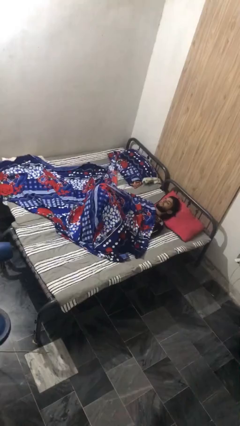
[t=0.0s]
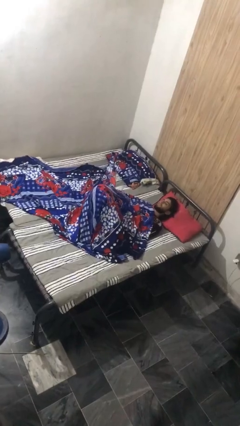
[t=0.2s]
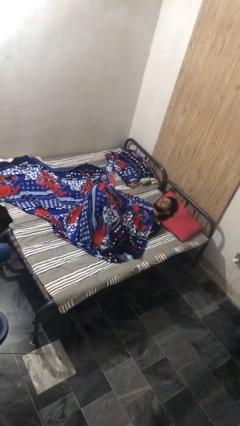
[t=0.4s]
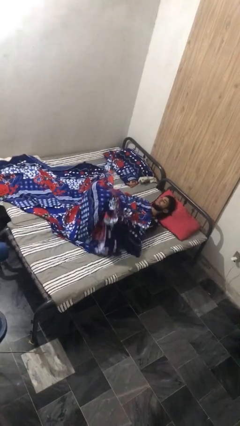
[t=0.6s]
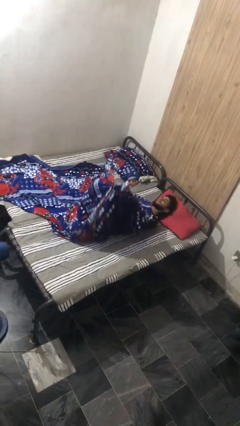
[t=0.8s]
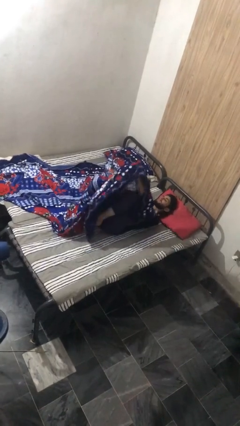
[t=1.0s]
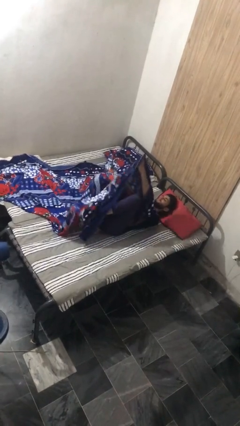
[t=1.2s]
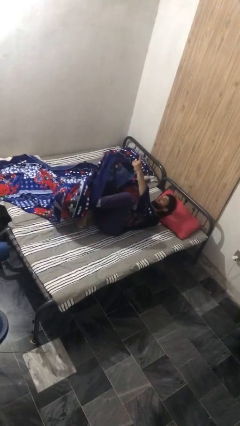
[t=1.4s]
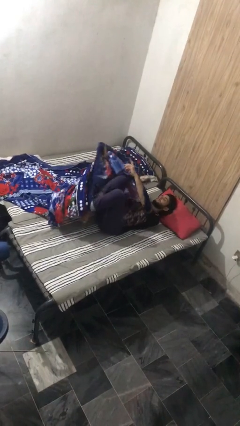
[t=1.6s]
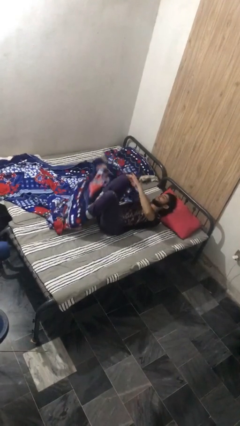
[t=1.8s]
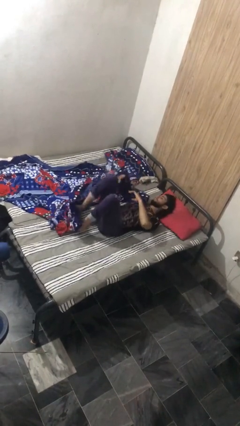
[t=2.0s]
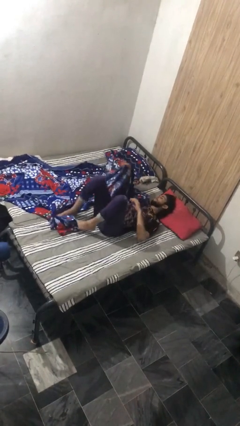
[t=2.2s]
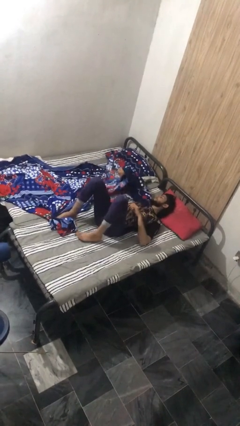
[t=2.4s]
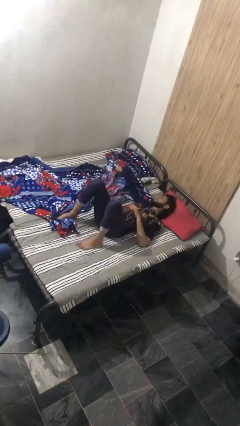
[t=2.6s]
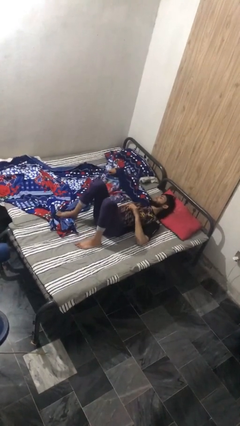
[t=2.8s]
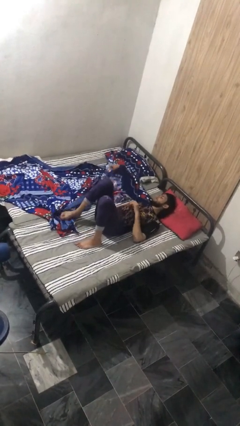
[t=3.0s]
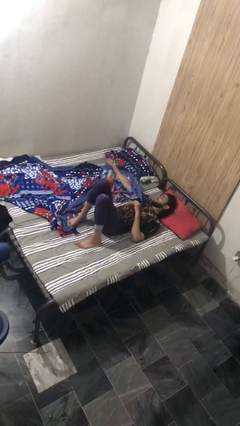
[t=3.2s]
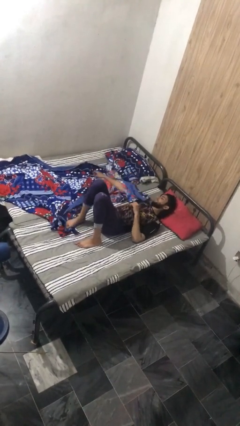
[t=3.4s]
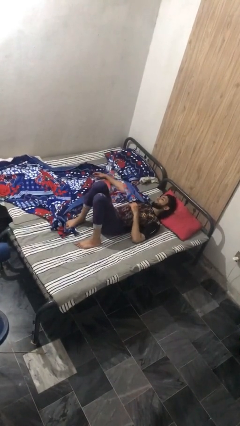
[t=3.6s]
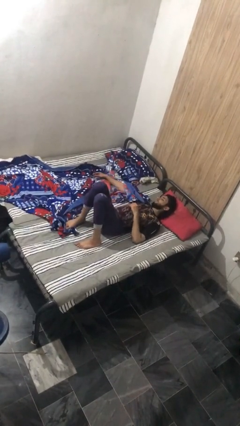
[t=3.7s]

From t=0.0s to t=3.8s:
person uncovers with bedsheets

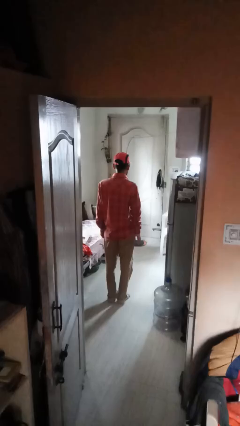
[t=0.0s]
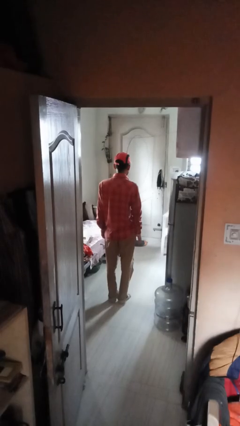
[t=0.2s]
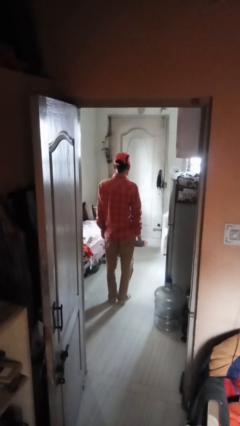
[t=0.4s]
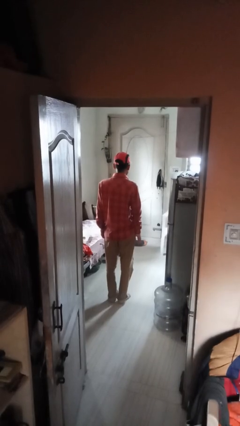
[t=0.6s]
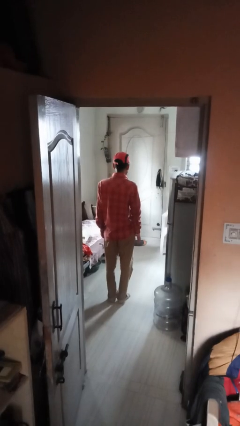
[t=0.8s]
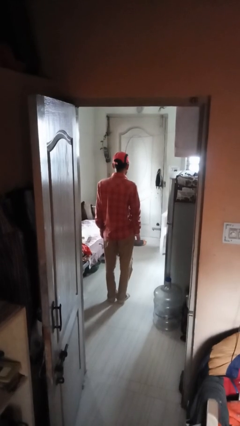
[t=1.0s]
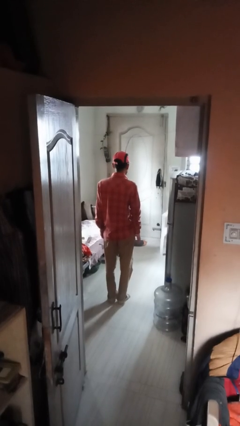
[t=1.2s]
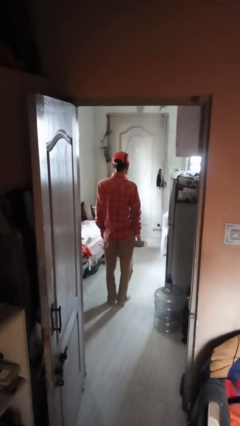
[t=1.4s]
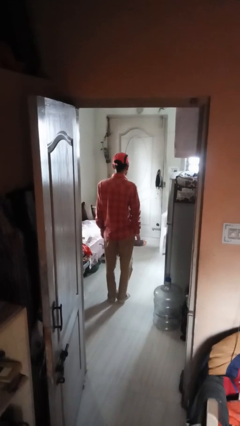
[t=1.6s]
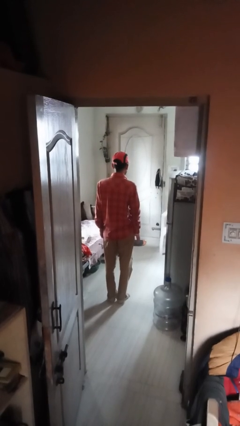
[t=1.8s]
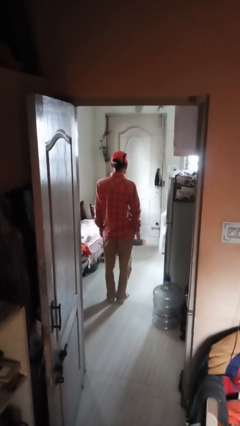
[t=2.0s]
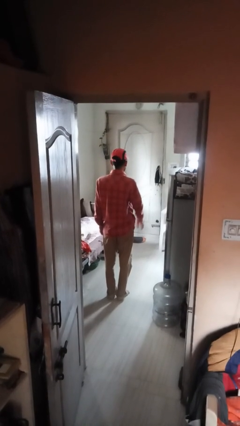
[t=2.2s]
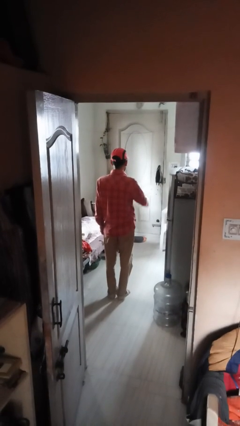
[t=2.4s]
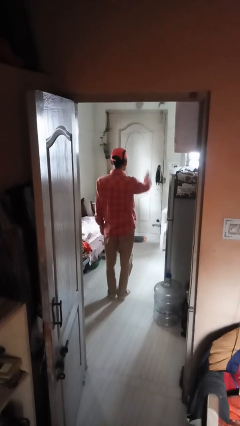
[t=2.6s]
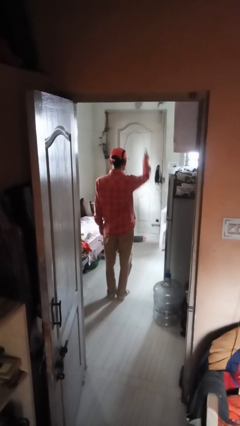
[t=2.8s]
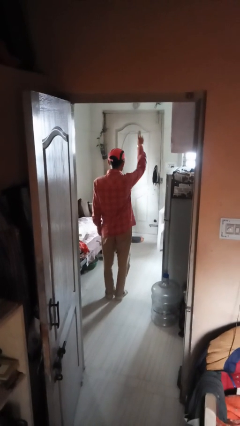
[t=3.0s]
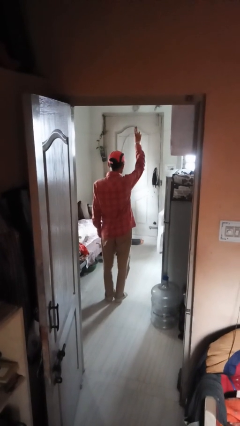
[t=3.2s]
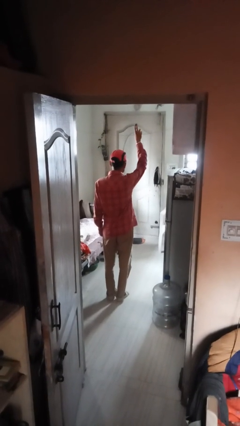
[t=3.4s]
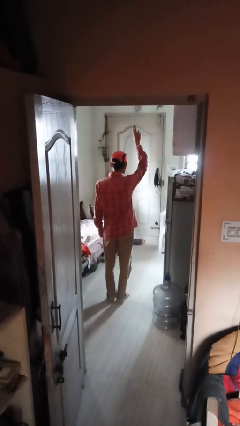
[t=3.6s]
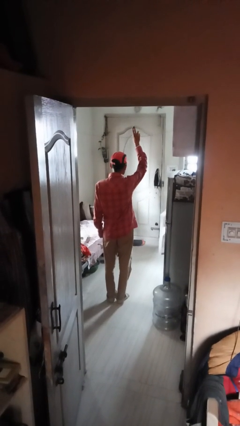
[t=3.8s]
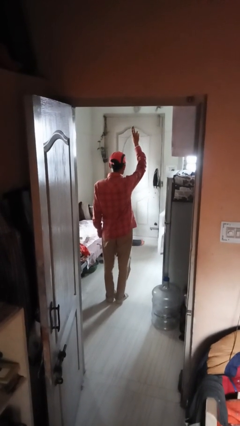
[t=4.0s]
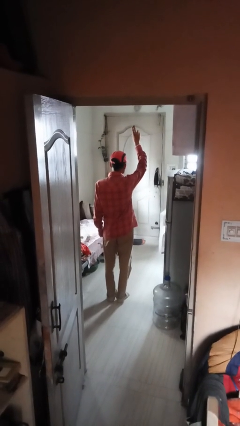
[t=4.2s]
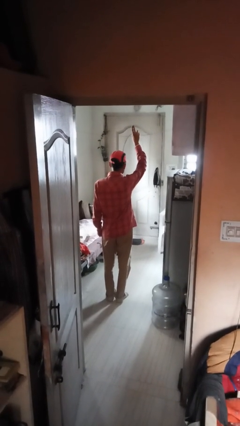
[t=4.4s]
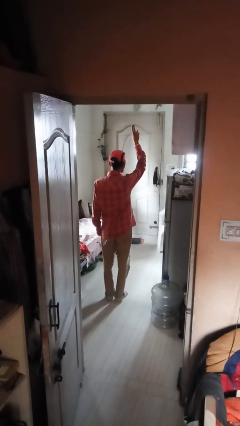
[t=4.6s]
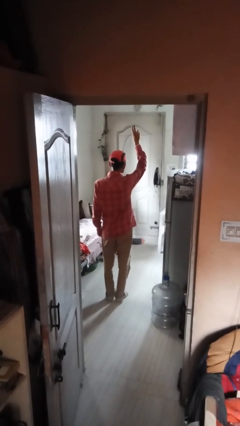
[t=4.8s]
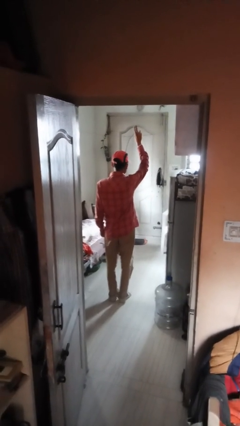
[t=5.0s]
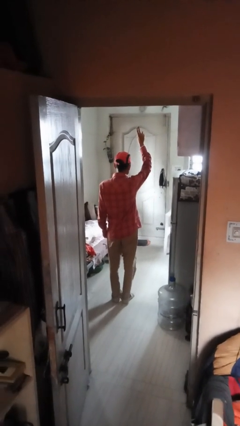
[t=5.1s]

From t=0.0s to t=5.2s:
person gestures swipe up

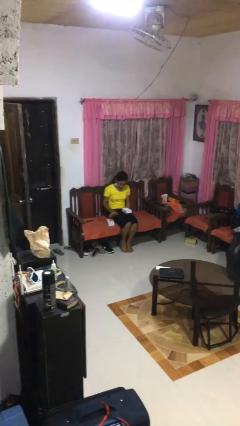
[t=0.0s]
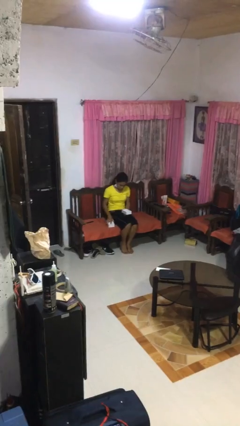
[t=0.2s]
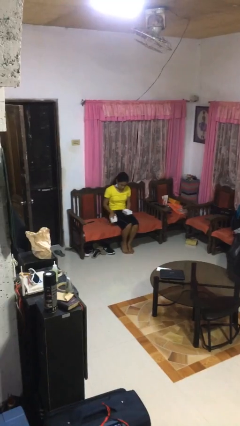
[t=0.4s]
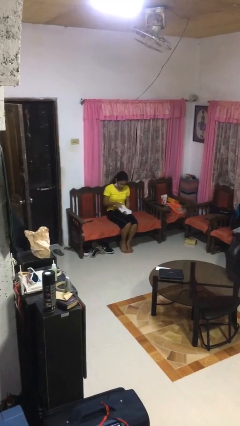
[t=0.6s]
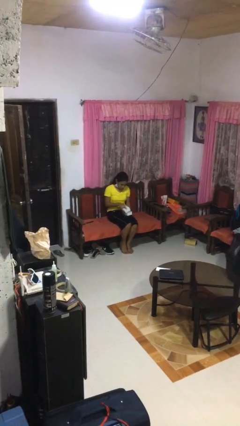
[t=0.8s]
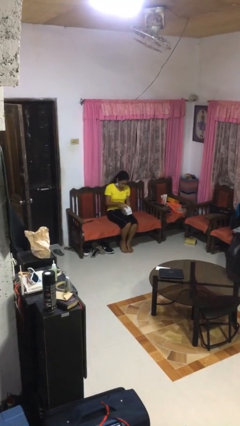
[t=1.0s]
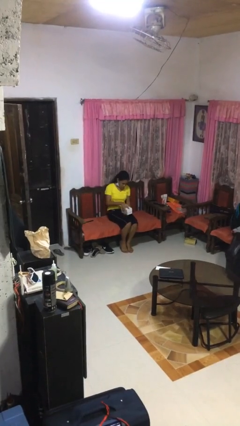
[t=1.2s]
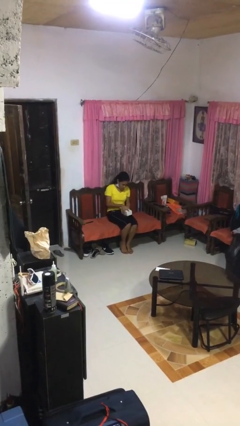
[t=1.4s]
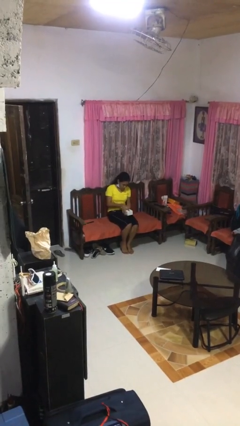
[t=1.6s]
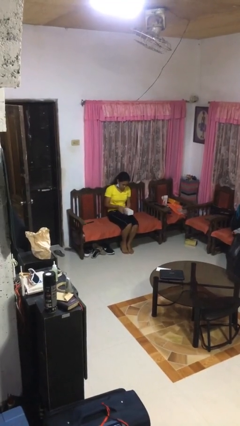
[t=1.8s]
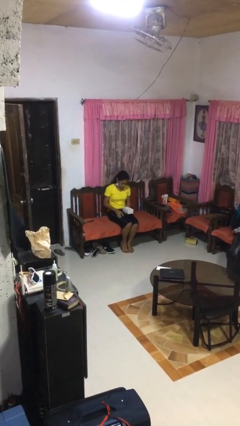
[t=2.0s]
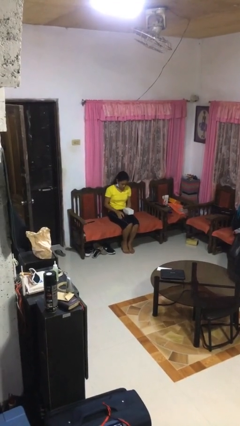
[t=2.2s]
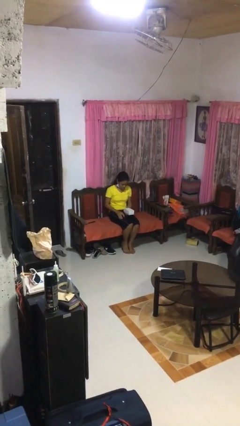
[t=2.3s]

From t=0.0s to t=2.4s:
person closes jewelry box

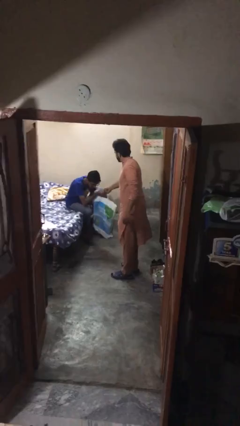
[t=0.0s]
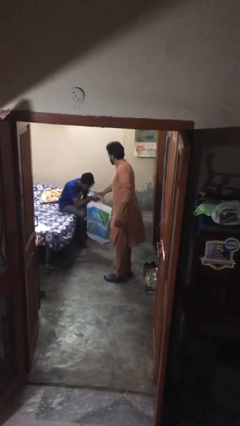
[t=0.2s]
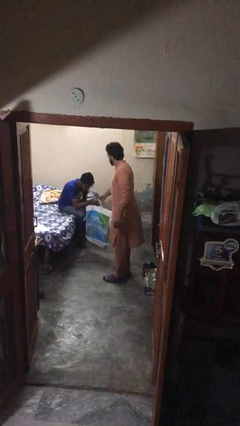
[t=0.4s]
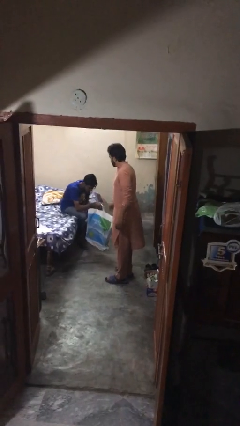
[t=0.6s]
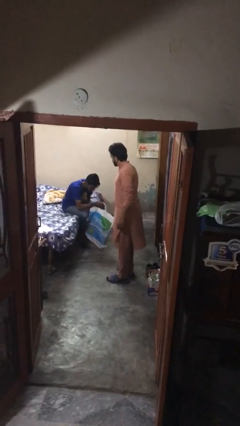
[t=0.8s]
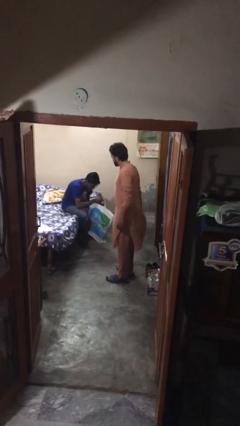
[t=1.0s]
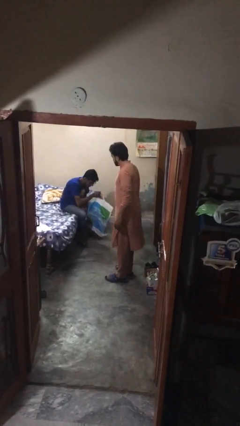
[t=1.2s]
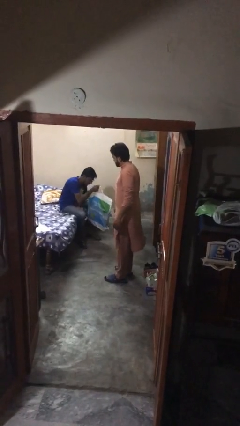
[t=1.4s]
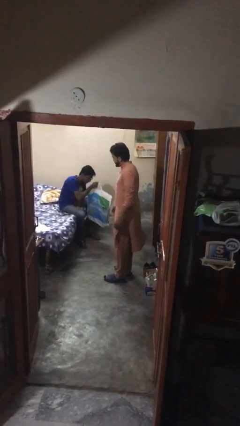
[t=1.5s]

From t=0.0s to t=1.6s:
person transfers object to person

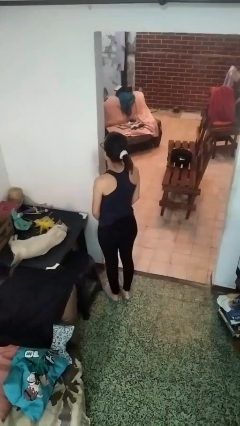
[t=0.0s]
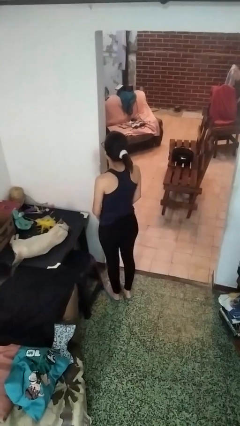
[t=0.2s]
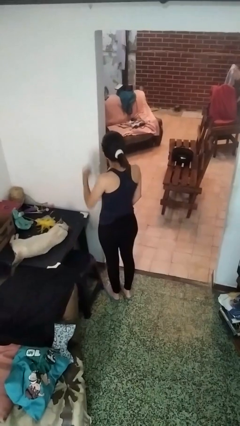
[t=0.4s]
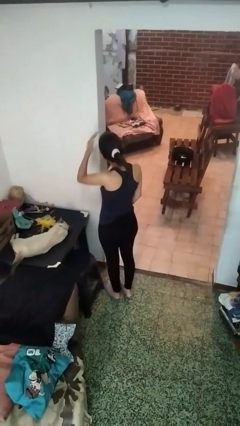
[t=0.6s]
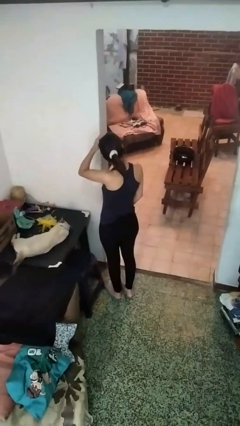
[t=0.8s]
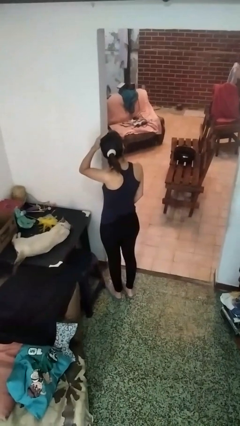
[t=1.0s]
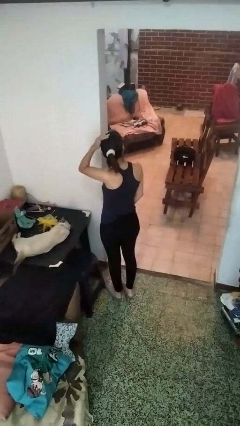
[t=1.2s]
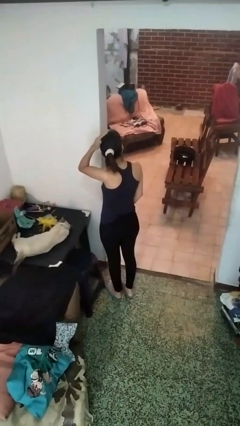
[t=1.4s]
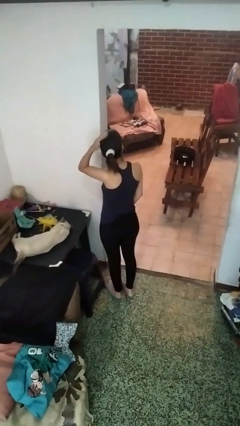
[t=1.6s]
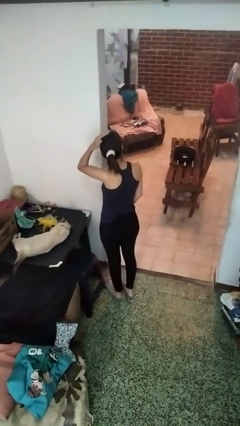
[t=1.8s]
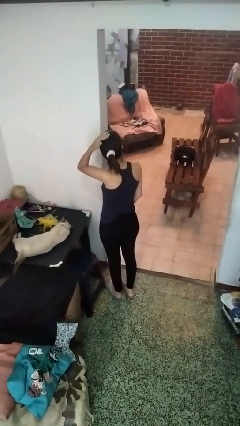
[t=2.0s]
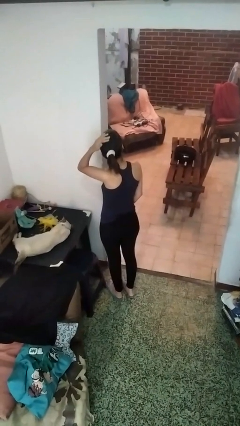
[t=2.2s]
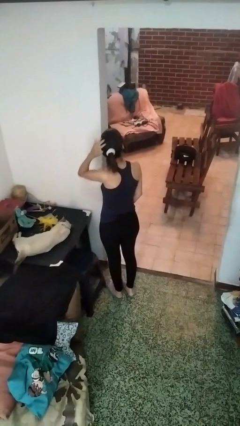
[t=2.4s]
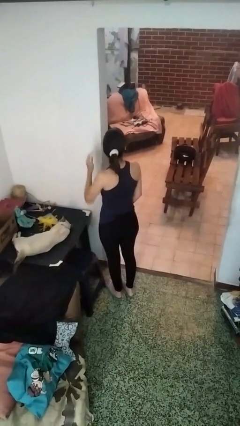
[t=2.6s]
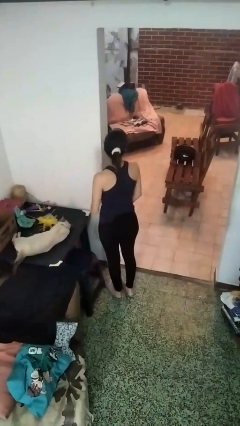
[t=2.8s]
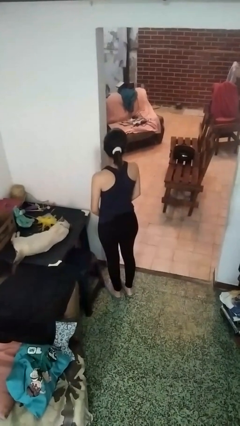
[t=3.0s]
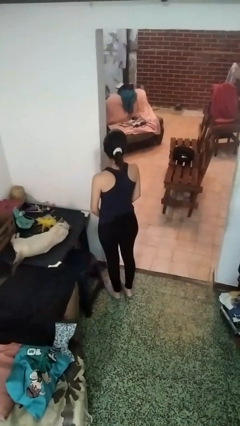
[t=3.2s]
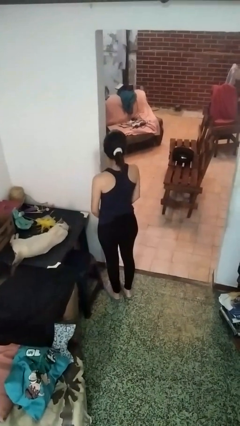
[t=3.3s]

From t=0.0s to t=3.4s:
person pats head

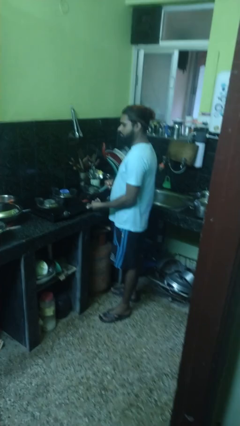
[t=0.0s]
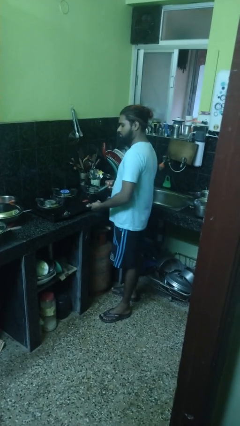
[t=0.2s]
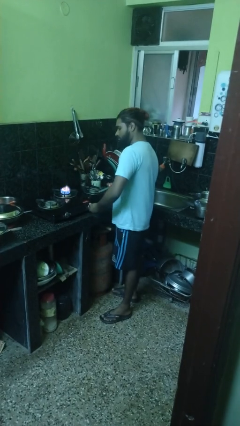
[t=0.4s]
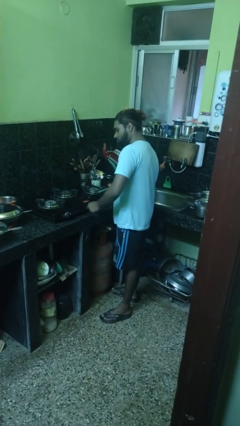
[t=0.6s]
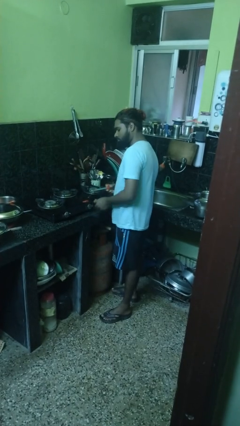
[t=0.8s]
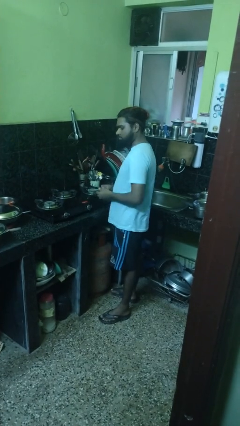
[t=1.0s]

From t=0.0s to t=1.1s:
person turns off stovetop
